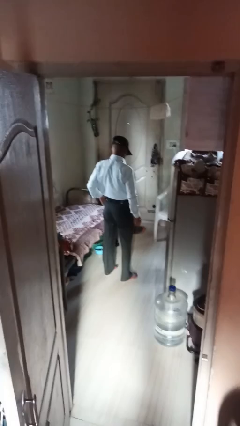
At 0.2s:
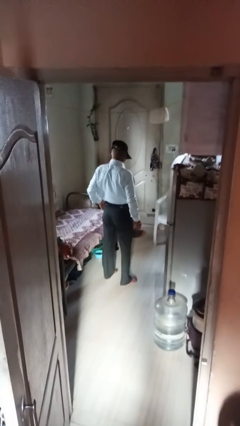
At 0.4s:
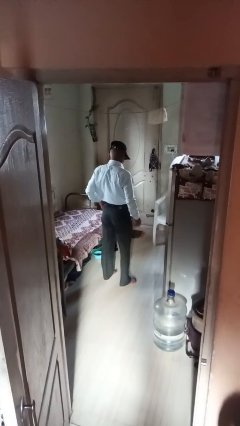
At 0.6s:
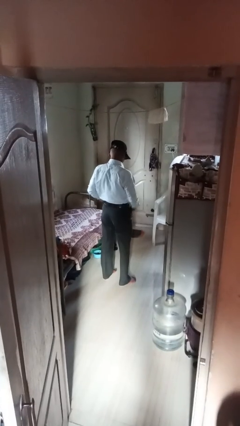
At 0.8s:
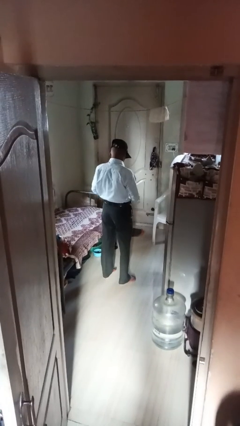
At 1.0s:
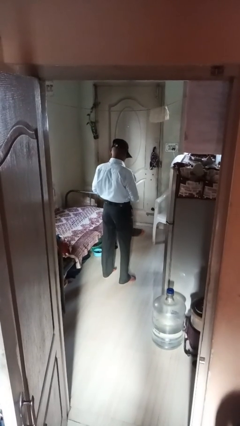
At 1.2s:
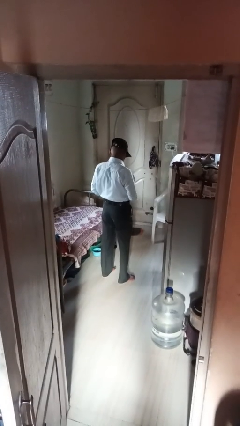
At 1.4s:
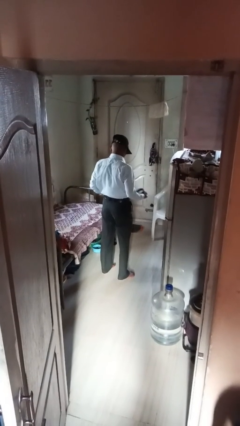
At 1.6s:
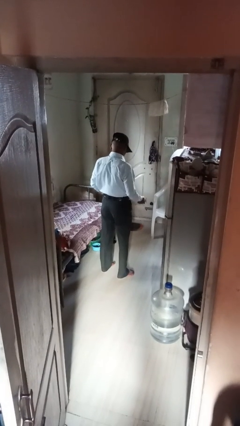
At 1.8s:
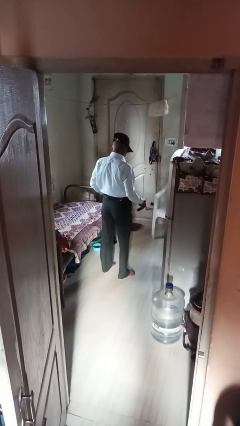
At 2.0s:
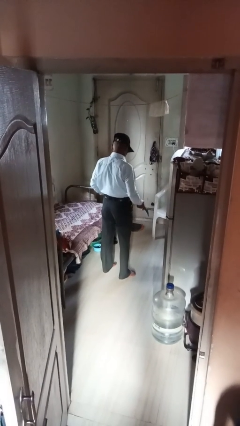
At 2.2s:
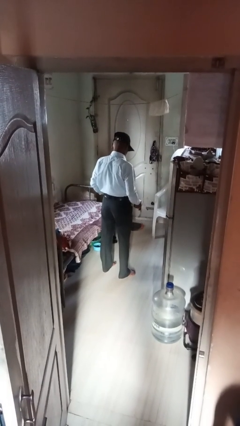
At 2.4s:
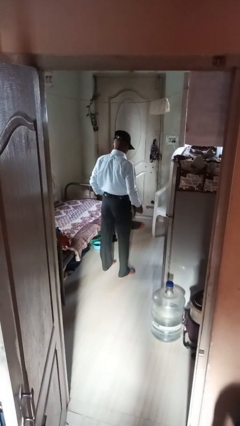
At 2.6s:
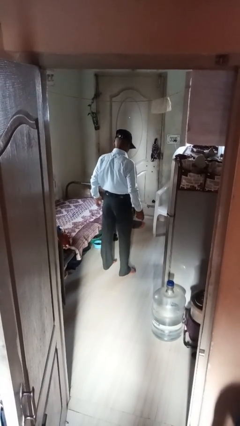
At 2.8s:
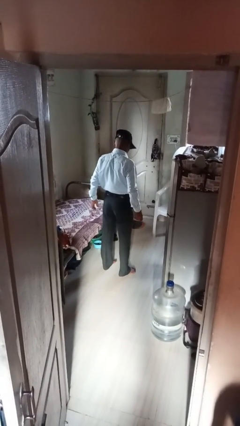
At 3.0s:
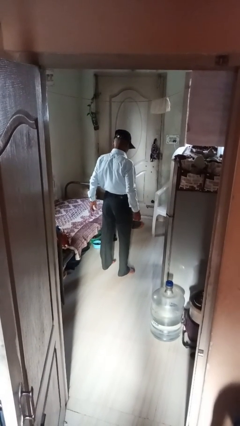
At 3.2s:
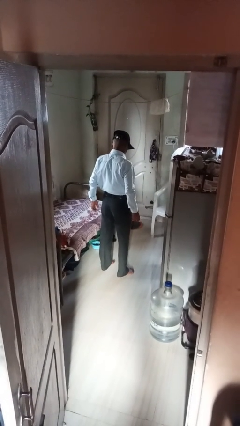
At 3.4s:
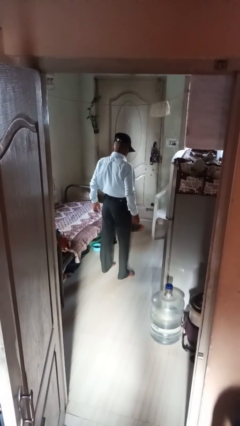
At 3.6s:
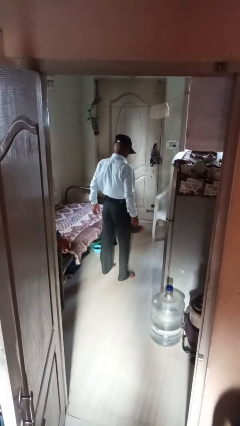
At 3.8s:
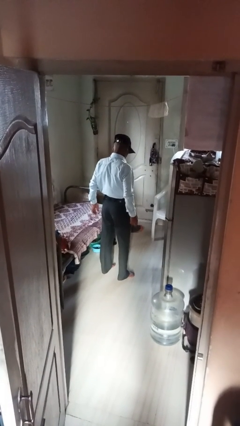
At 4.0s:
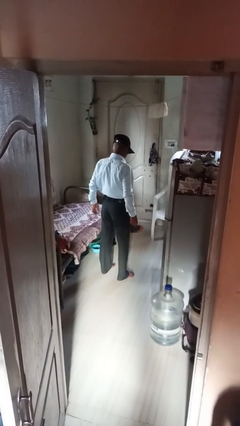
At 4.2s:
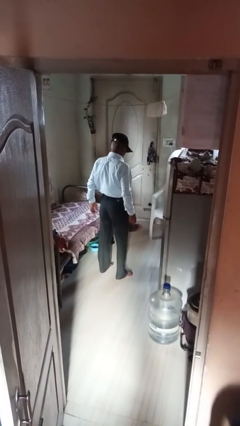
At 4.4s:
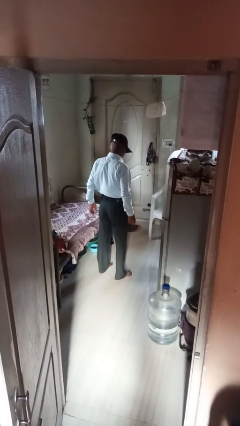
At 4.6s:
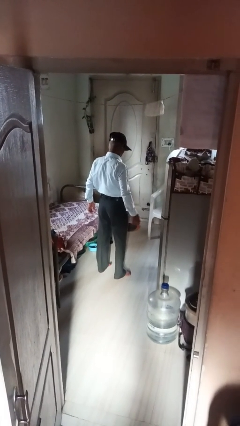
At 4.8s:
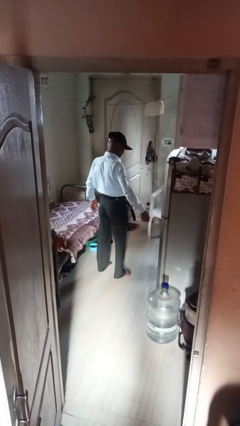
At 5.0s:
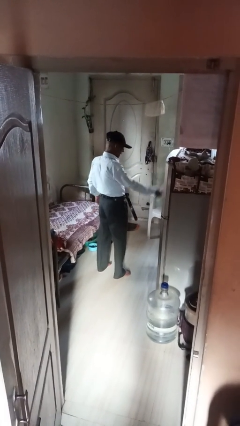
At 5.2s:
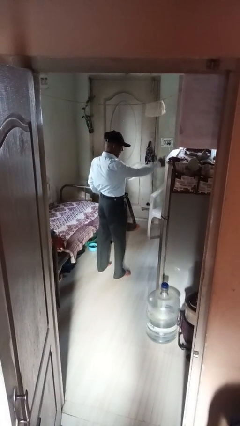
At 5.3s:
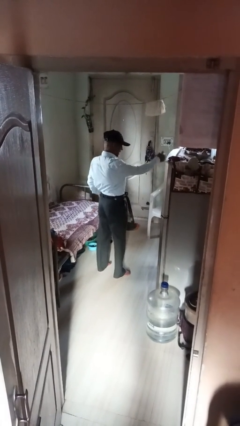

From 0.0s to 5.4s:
person takes off belt

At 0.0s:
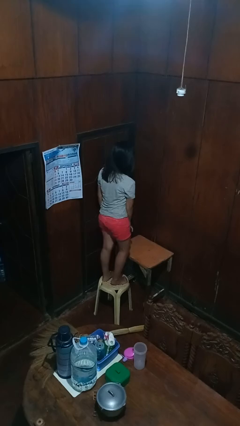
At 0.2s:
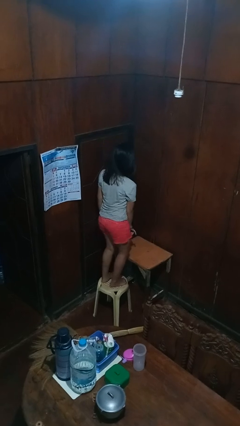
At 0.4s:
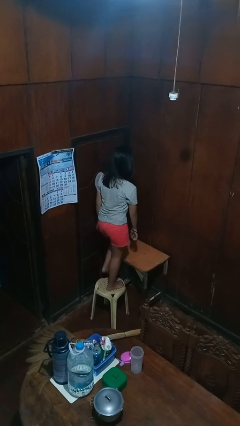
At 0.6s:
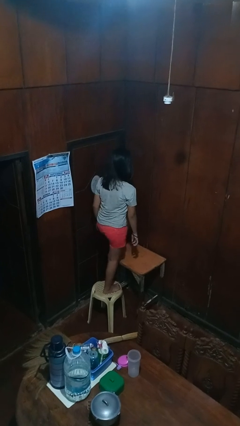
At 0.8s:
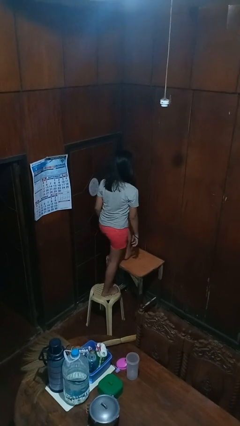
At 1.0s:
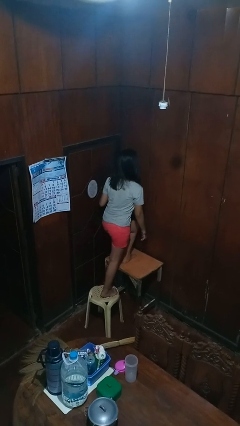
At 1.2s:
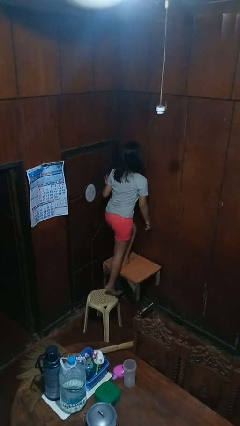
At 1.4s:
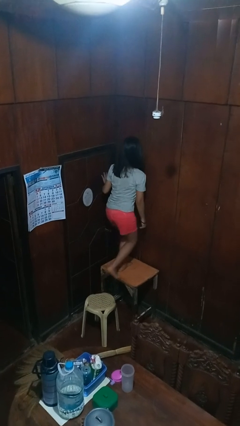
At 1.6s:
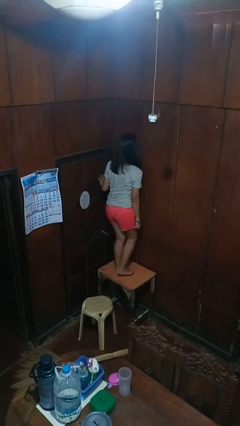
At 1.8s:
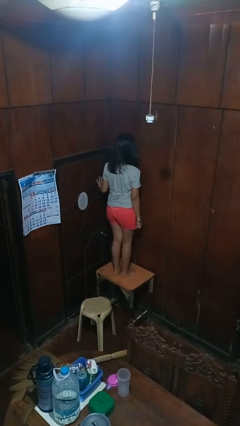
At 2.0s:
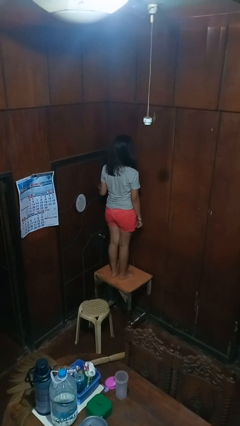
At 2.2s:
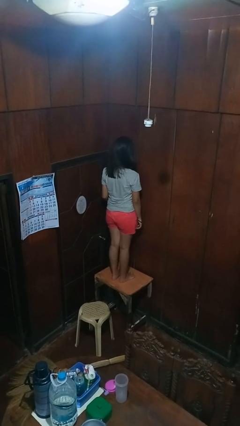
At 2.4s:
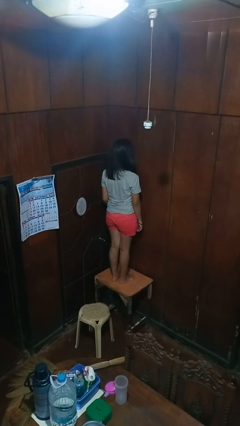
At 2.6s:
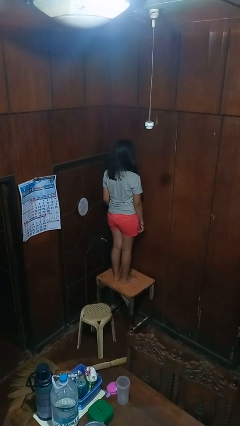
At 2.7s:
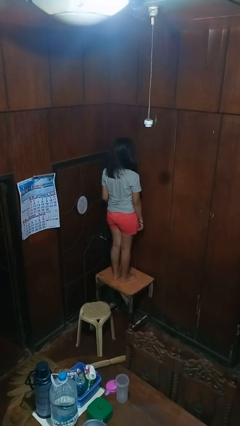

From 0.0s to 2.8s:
person climbs on table

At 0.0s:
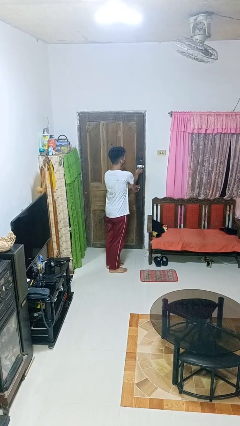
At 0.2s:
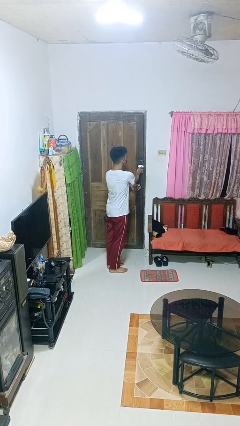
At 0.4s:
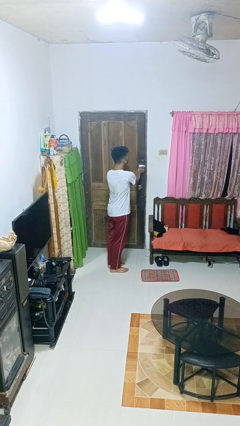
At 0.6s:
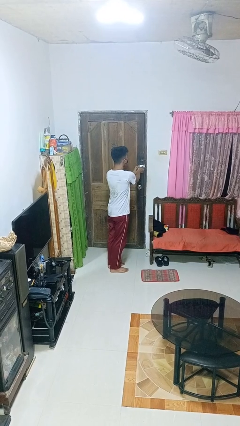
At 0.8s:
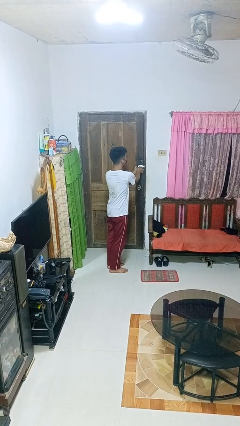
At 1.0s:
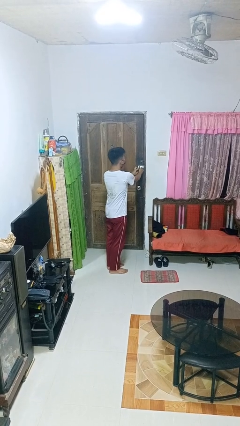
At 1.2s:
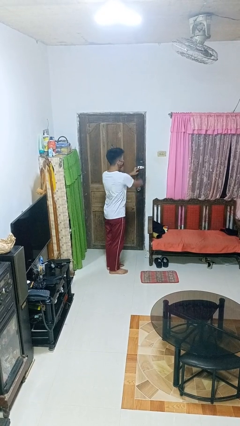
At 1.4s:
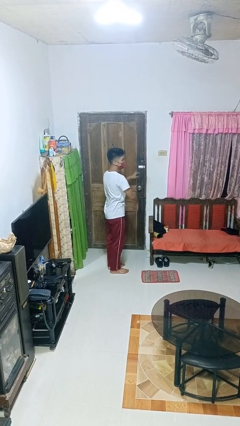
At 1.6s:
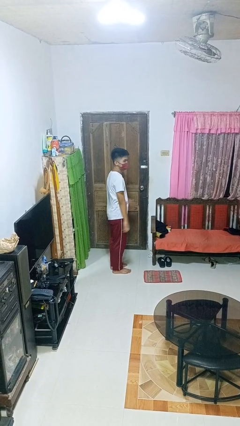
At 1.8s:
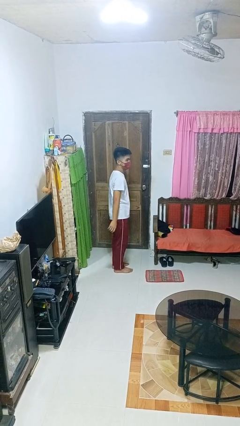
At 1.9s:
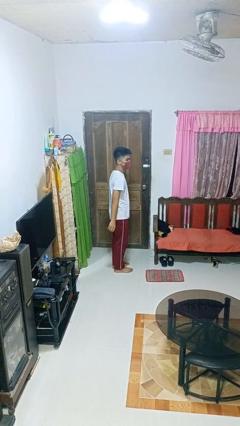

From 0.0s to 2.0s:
person locks door with keys

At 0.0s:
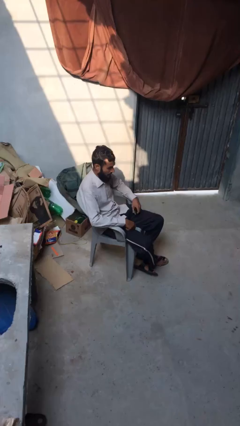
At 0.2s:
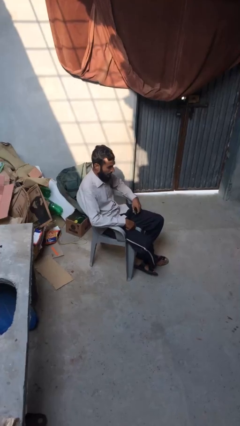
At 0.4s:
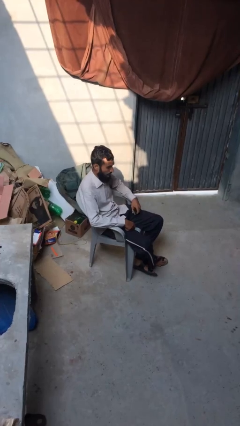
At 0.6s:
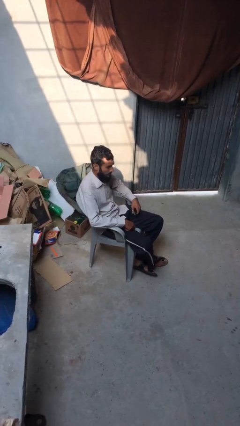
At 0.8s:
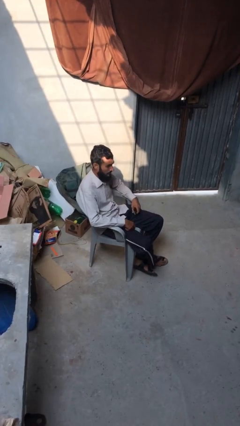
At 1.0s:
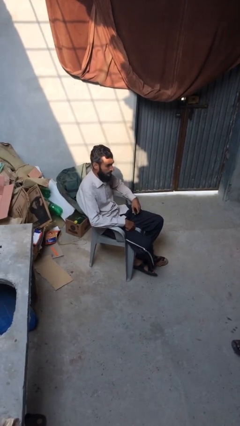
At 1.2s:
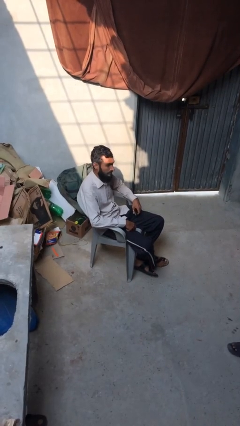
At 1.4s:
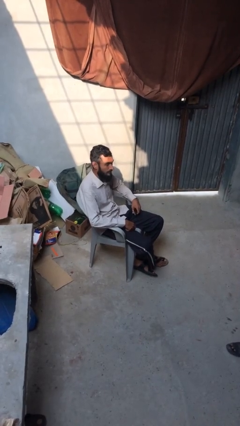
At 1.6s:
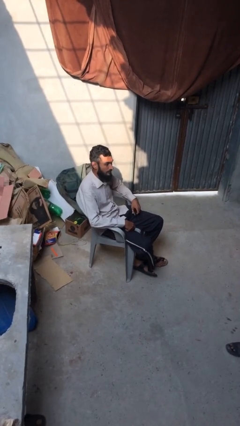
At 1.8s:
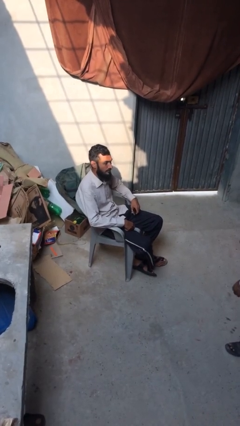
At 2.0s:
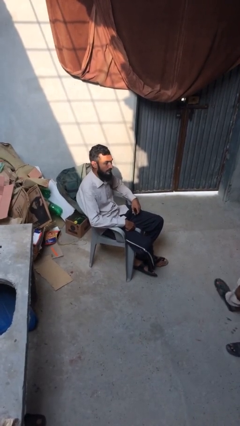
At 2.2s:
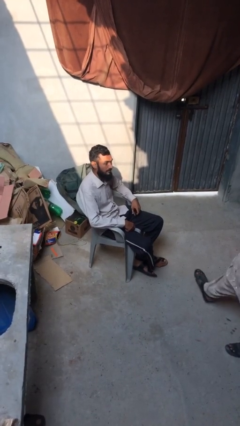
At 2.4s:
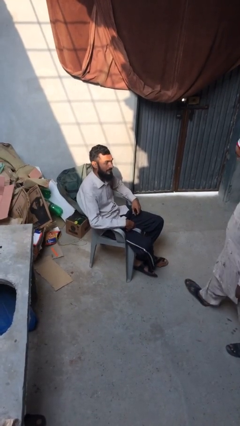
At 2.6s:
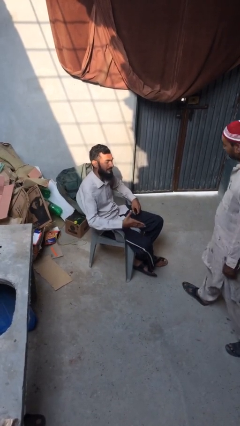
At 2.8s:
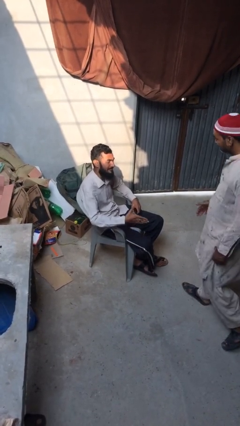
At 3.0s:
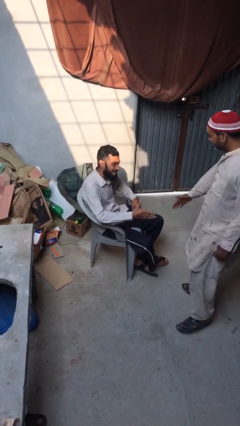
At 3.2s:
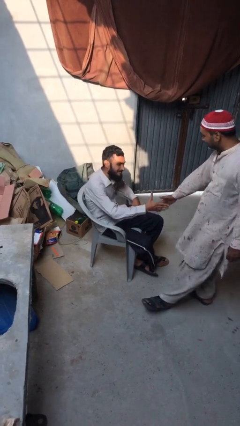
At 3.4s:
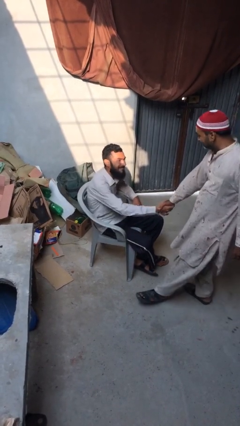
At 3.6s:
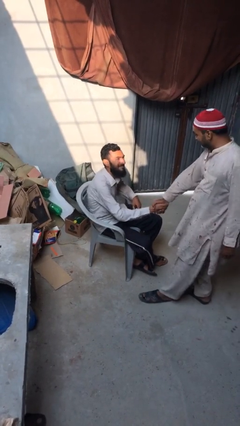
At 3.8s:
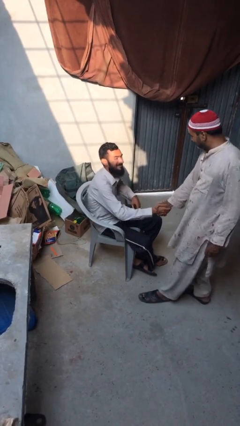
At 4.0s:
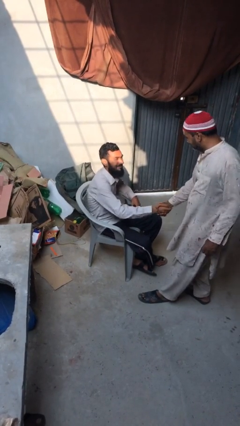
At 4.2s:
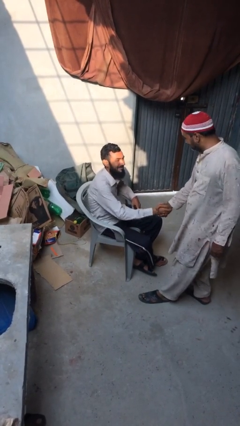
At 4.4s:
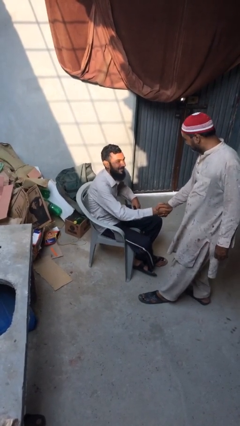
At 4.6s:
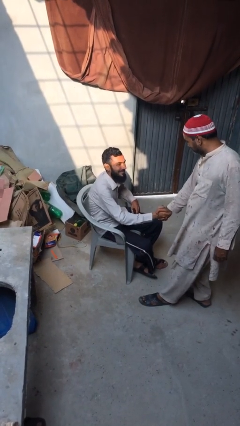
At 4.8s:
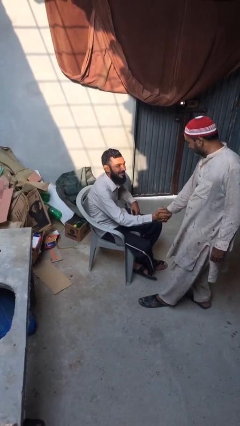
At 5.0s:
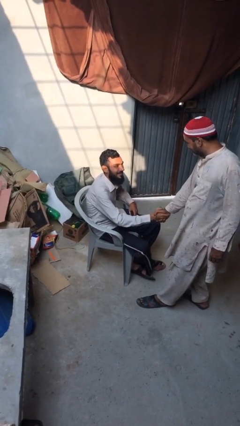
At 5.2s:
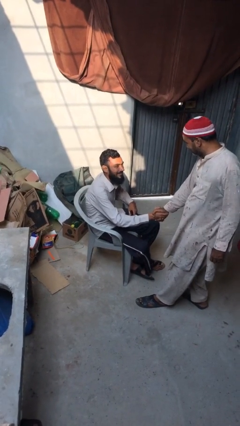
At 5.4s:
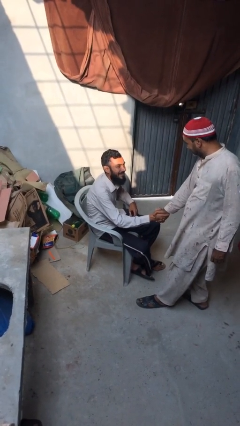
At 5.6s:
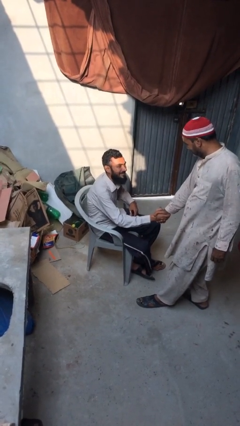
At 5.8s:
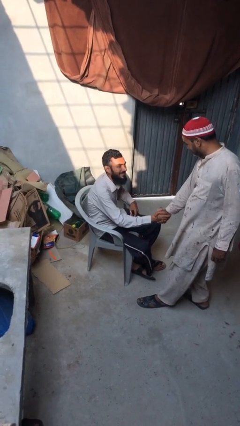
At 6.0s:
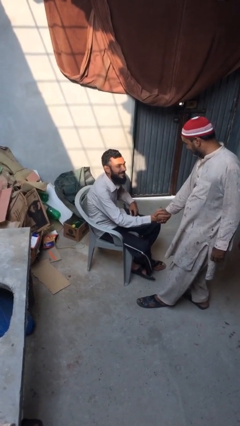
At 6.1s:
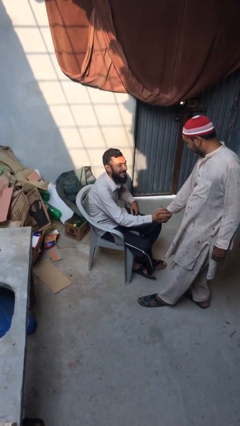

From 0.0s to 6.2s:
person shakes hand

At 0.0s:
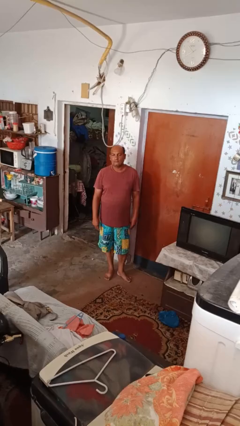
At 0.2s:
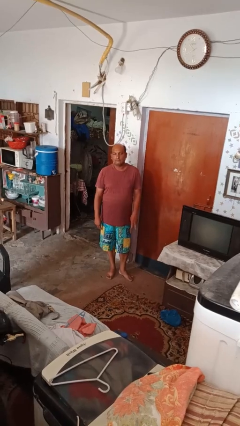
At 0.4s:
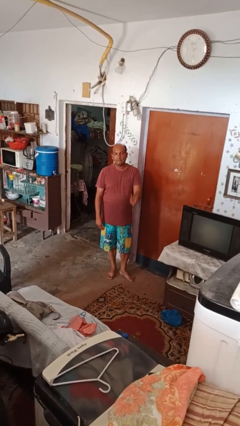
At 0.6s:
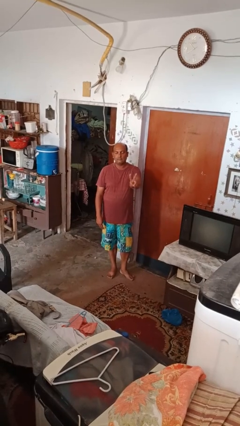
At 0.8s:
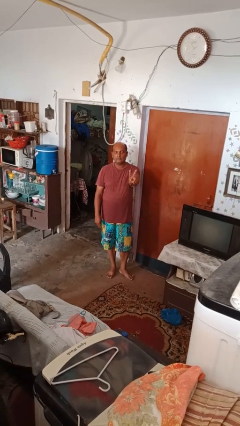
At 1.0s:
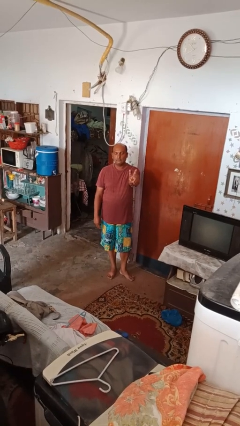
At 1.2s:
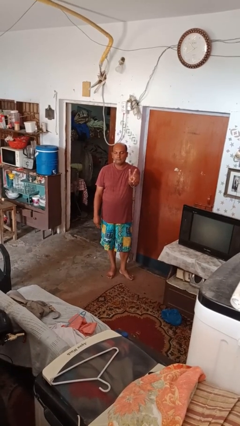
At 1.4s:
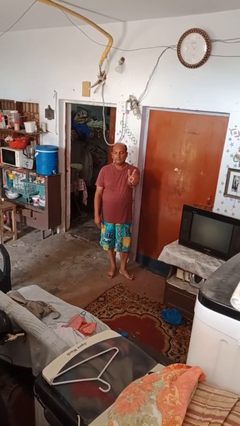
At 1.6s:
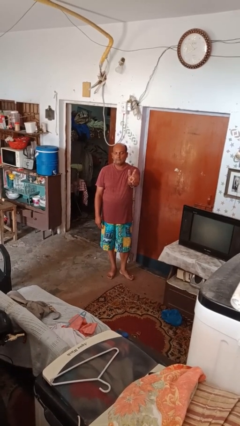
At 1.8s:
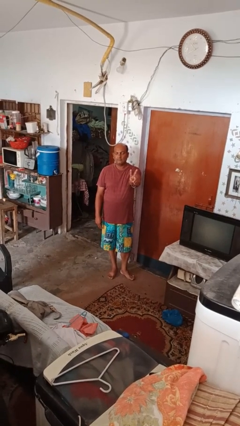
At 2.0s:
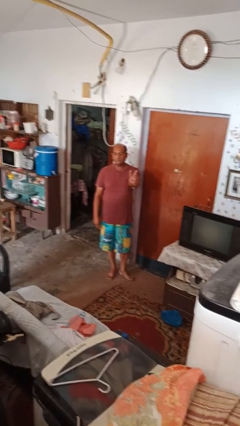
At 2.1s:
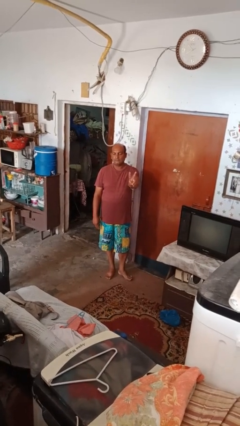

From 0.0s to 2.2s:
person gestures peace
